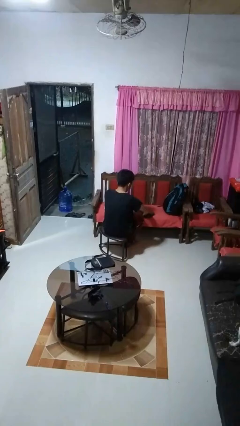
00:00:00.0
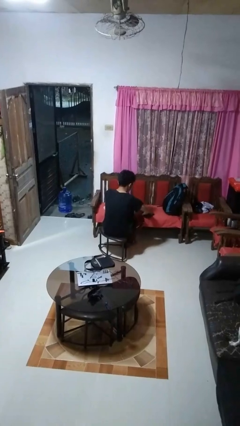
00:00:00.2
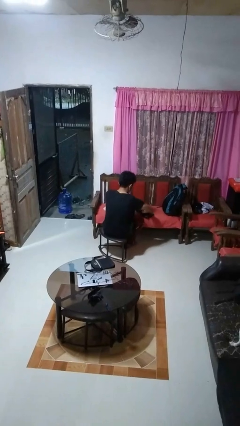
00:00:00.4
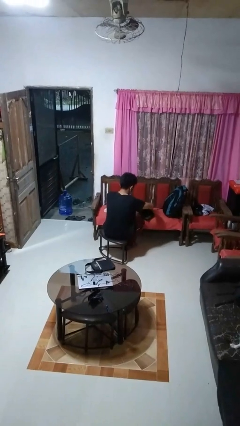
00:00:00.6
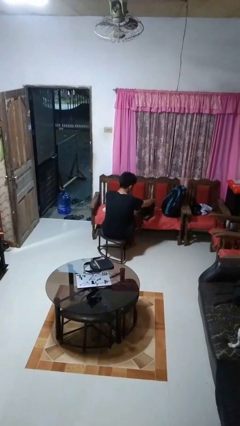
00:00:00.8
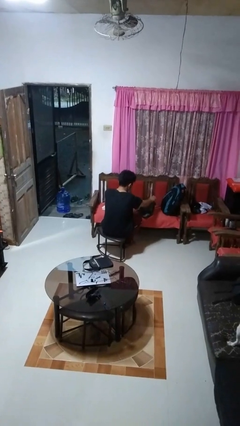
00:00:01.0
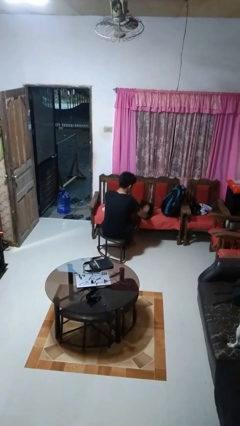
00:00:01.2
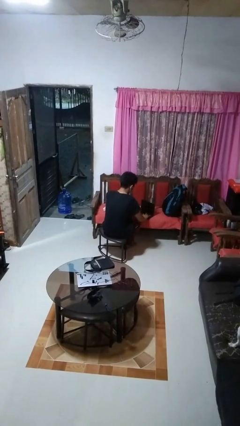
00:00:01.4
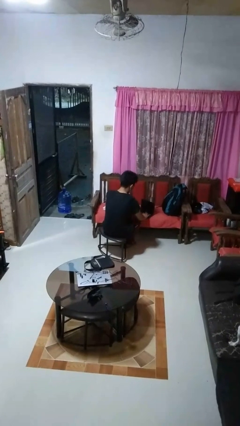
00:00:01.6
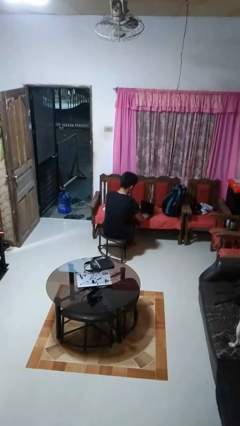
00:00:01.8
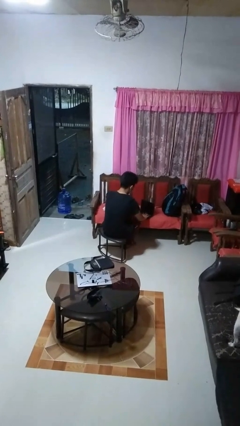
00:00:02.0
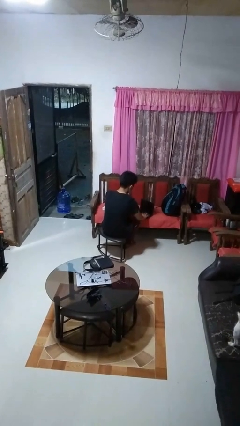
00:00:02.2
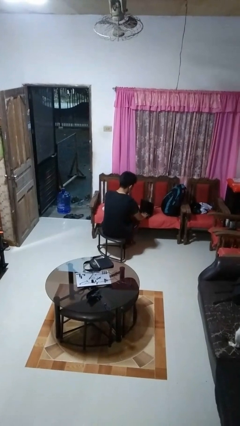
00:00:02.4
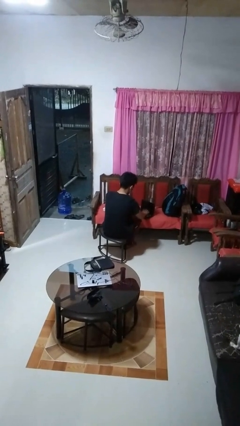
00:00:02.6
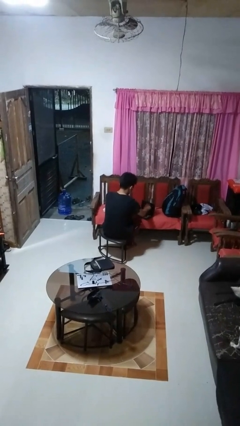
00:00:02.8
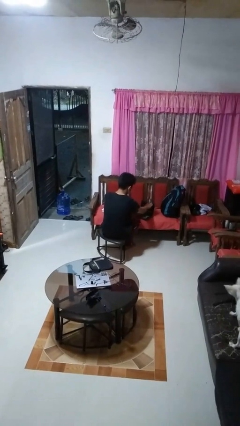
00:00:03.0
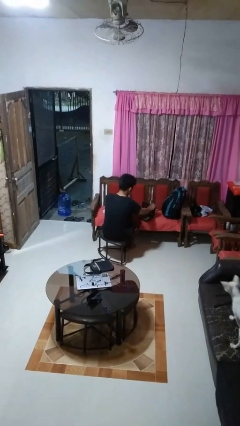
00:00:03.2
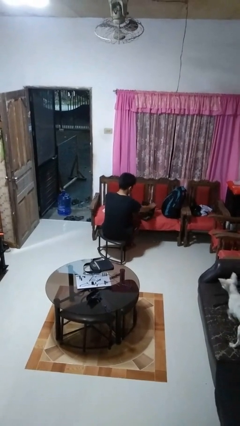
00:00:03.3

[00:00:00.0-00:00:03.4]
person opens laptop

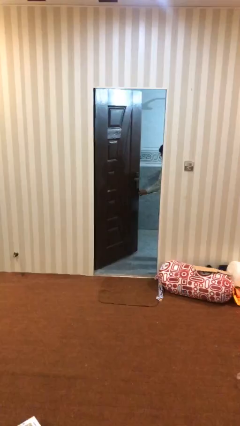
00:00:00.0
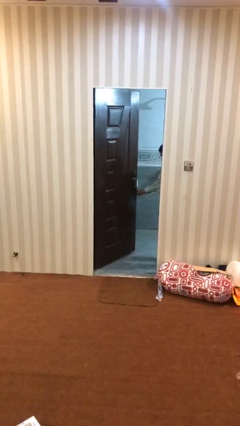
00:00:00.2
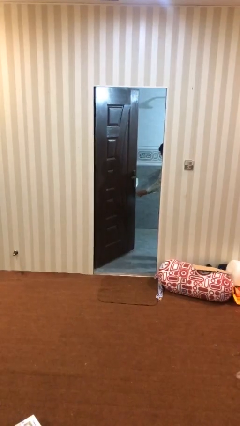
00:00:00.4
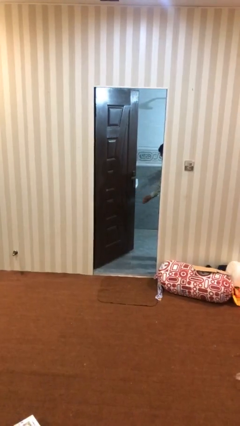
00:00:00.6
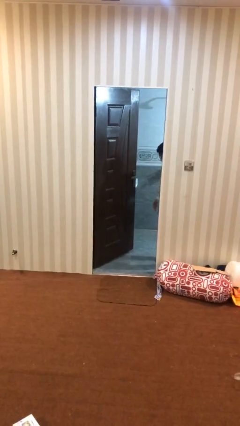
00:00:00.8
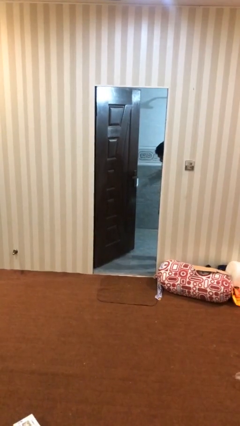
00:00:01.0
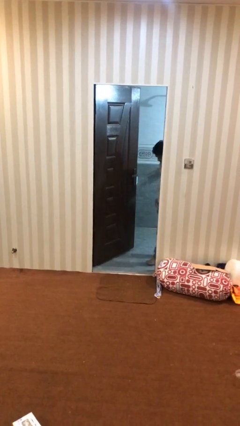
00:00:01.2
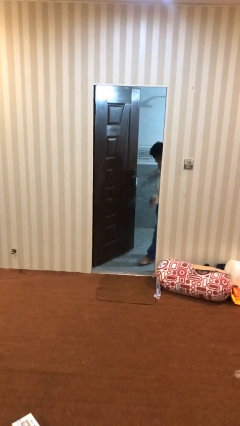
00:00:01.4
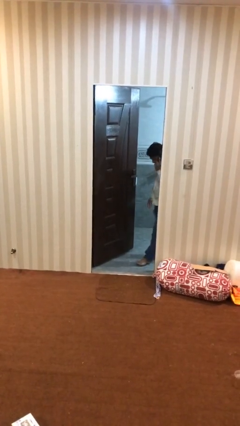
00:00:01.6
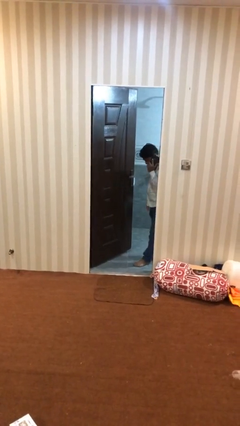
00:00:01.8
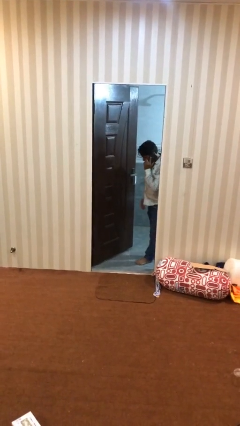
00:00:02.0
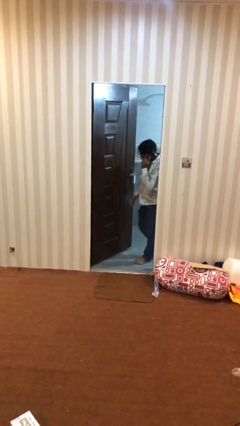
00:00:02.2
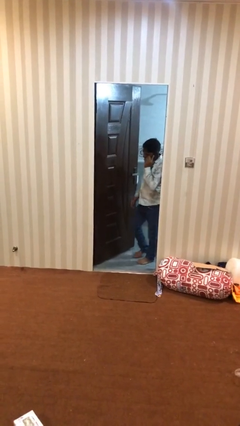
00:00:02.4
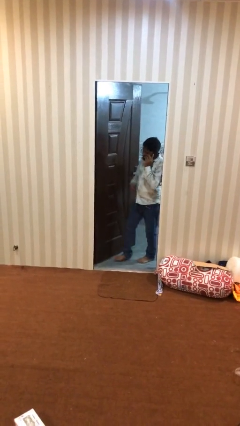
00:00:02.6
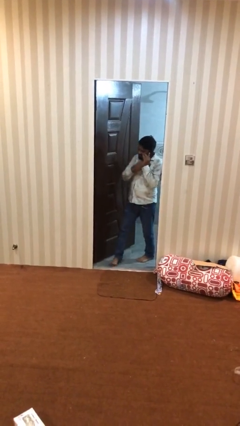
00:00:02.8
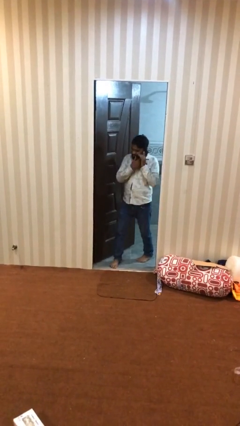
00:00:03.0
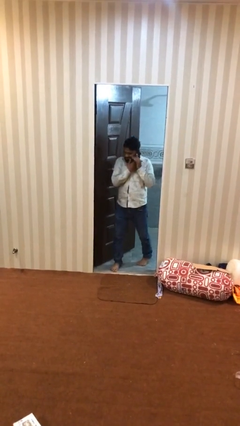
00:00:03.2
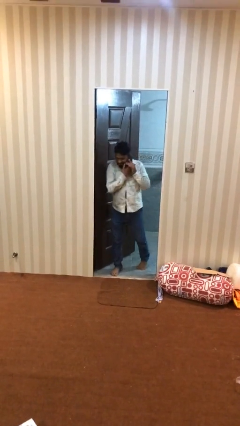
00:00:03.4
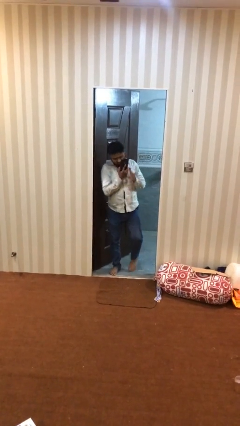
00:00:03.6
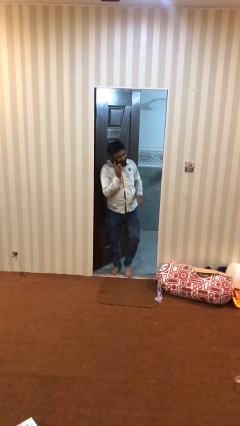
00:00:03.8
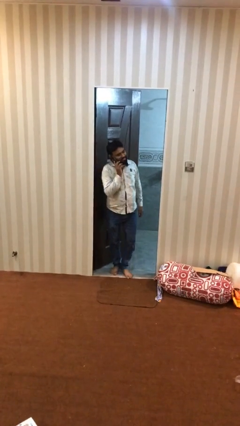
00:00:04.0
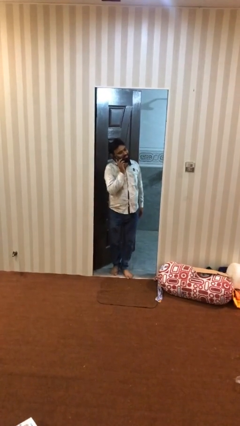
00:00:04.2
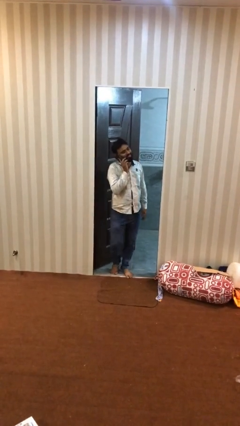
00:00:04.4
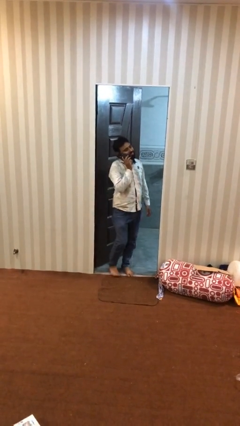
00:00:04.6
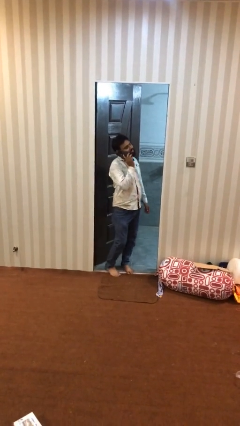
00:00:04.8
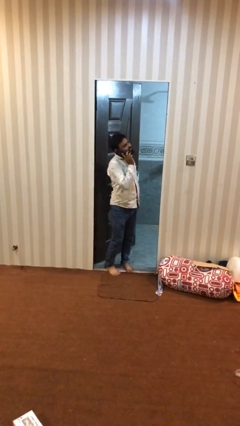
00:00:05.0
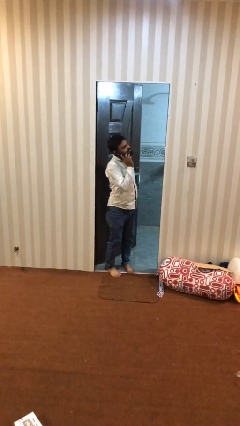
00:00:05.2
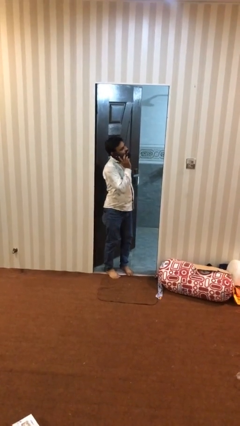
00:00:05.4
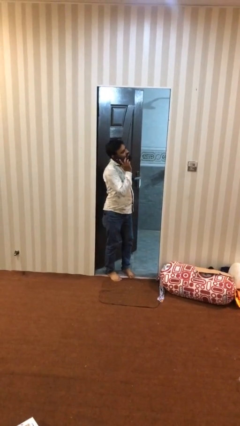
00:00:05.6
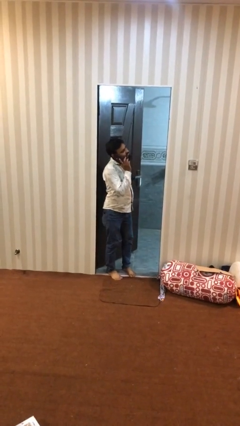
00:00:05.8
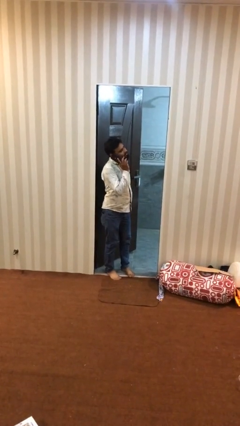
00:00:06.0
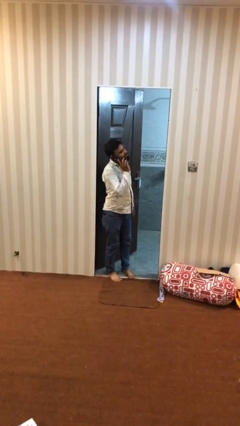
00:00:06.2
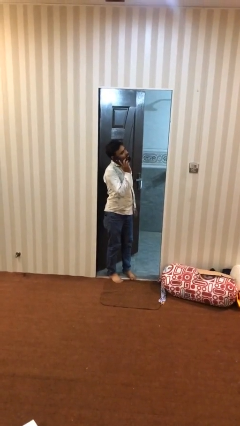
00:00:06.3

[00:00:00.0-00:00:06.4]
person enters scene through structure

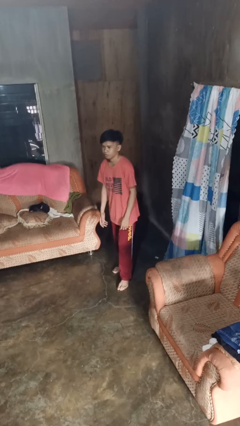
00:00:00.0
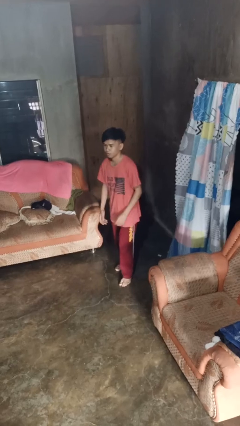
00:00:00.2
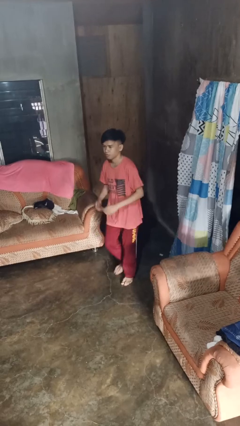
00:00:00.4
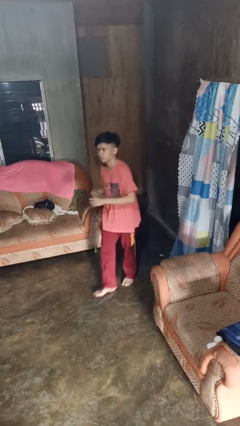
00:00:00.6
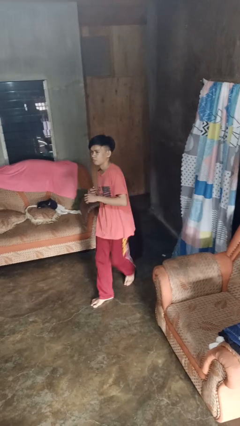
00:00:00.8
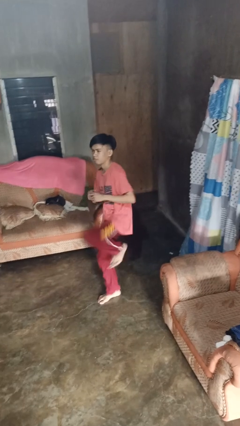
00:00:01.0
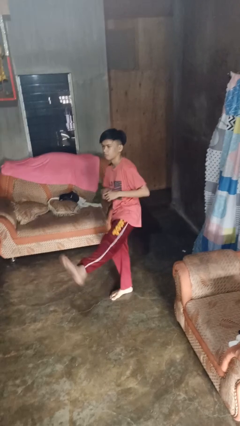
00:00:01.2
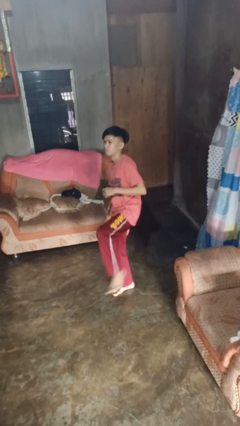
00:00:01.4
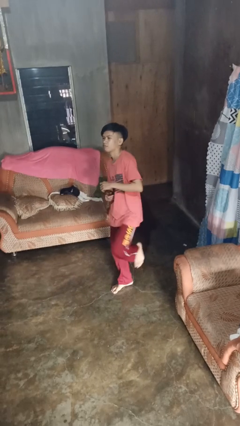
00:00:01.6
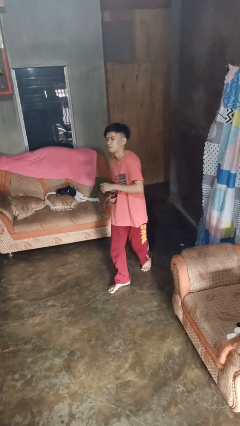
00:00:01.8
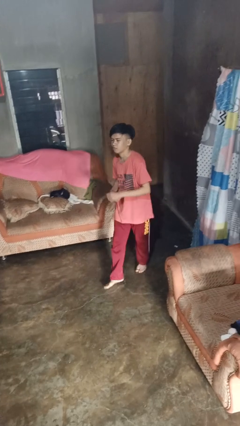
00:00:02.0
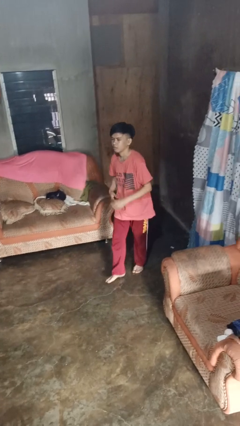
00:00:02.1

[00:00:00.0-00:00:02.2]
person karate kicks

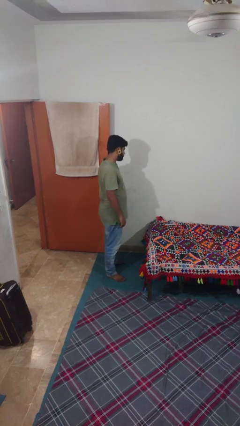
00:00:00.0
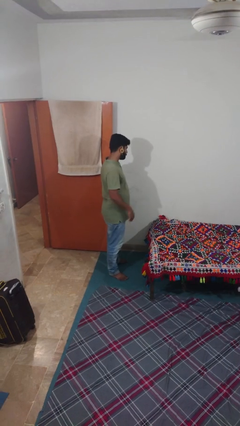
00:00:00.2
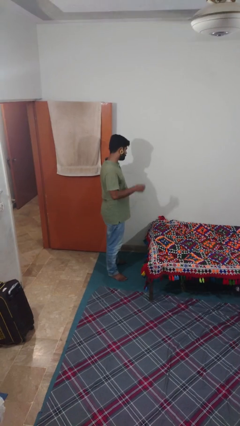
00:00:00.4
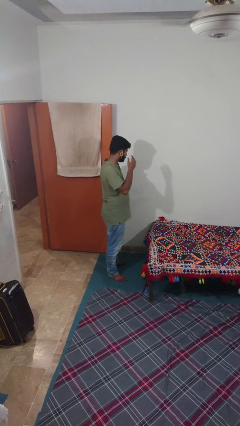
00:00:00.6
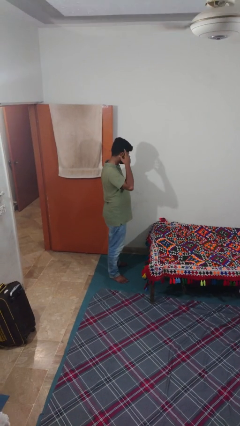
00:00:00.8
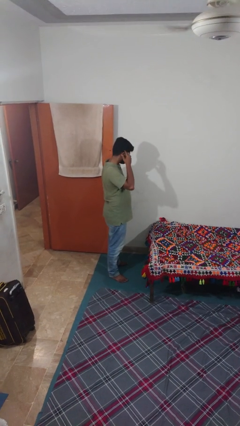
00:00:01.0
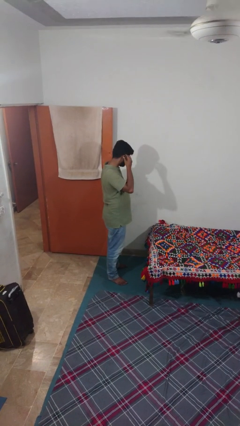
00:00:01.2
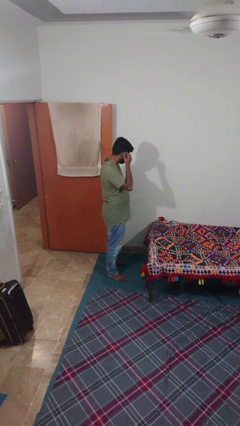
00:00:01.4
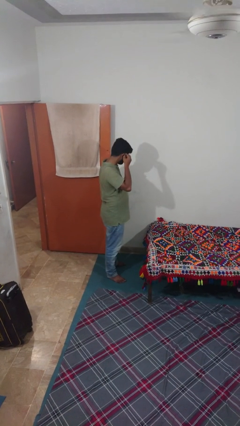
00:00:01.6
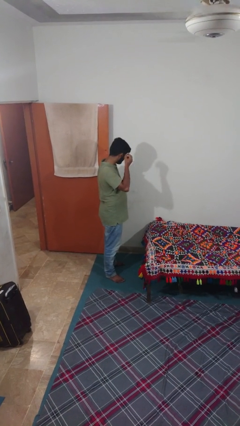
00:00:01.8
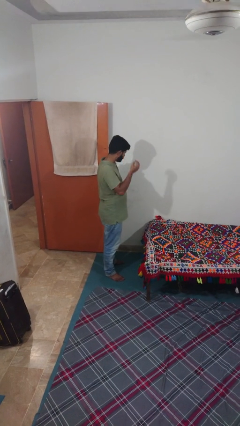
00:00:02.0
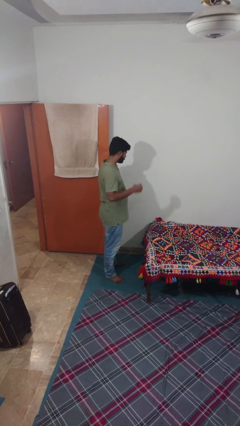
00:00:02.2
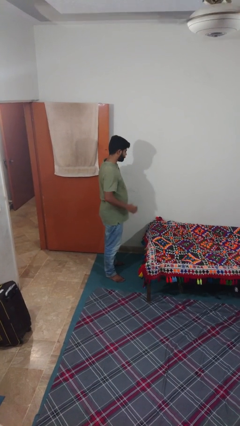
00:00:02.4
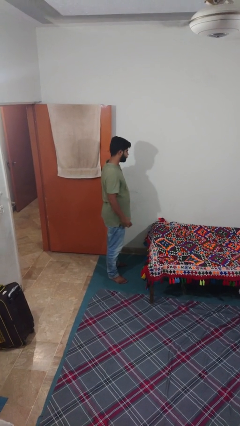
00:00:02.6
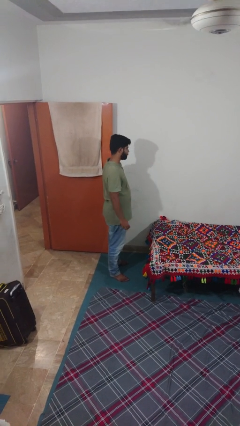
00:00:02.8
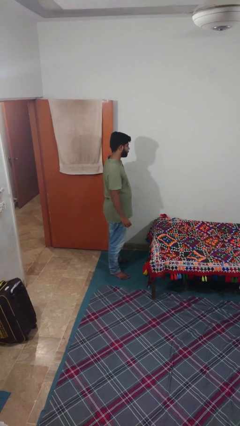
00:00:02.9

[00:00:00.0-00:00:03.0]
person takes off earrings

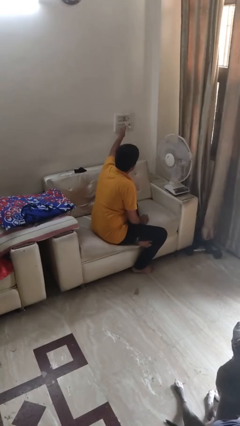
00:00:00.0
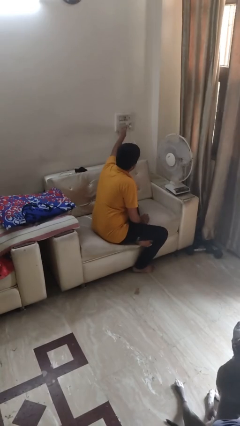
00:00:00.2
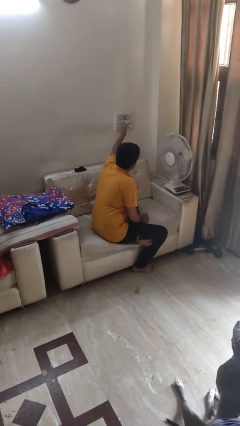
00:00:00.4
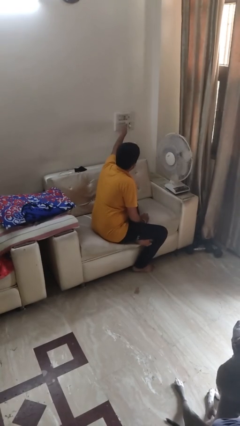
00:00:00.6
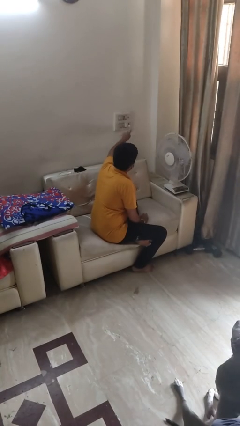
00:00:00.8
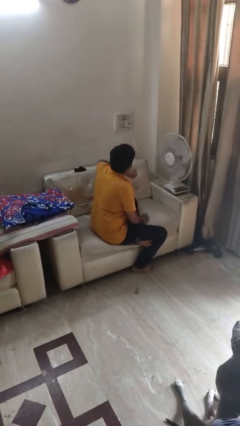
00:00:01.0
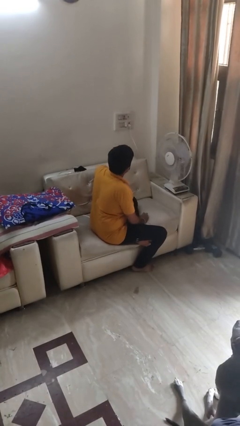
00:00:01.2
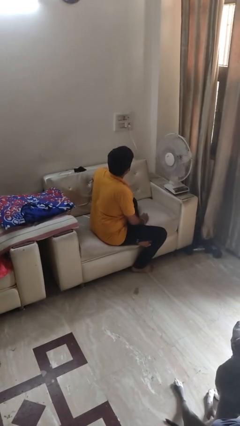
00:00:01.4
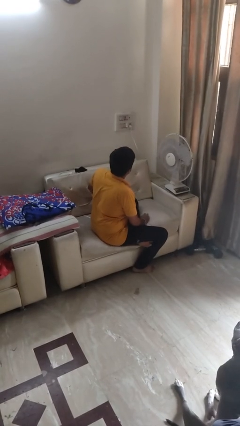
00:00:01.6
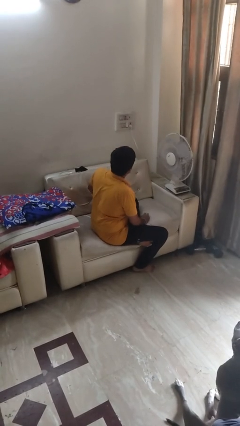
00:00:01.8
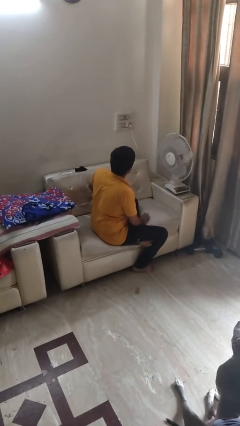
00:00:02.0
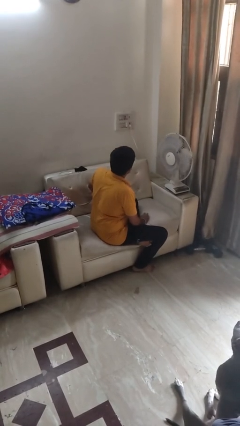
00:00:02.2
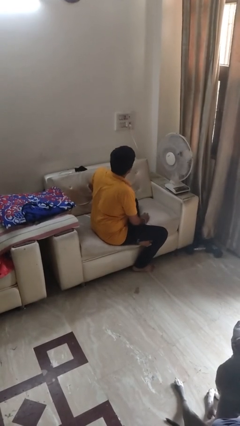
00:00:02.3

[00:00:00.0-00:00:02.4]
person turns off fan

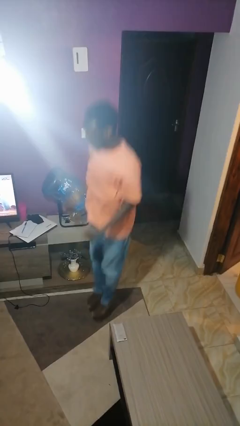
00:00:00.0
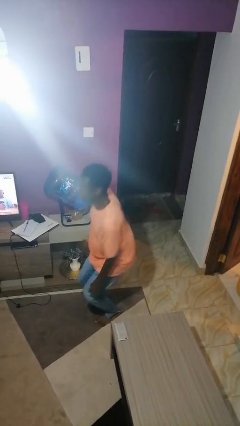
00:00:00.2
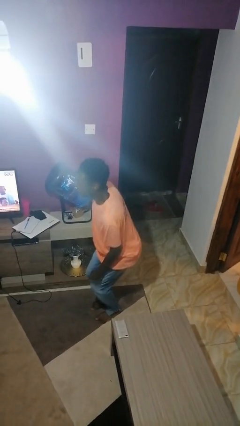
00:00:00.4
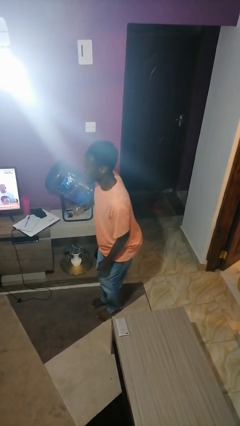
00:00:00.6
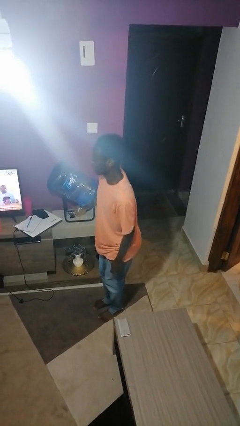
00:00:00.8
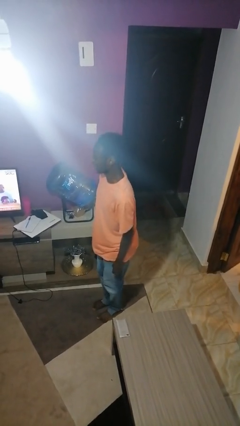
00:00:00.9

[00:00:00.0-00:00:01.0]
person jumps
